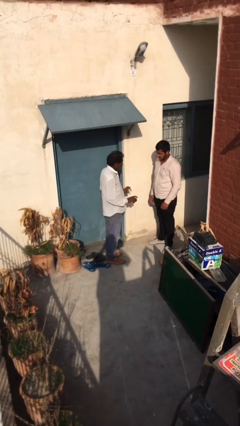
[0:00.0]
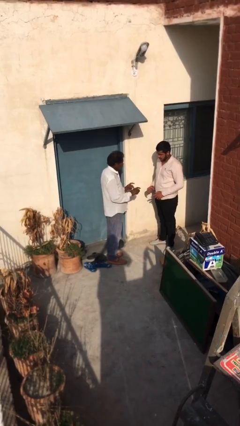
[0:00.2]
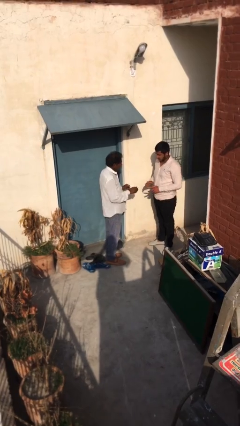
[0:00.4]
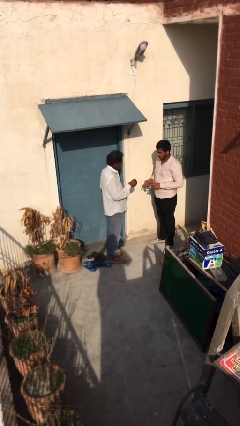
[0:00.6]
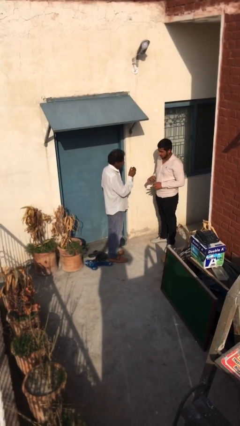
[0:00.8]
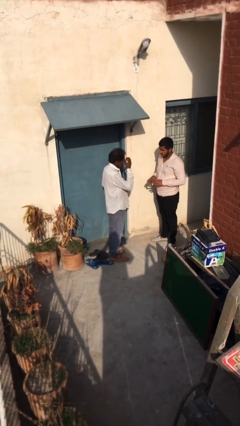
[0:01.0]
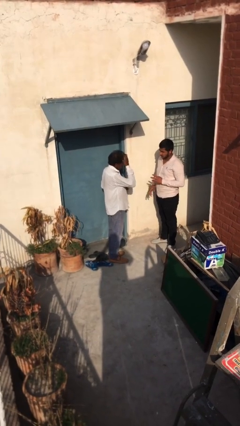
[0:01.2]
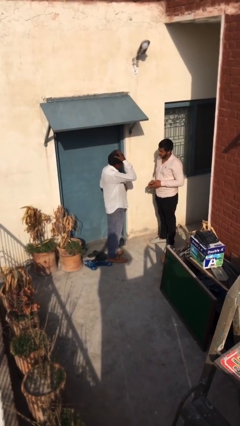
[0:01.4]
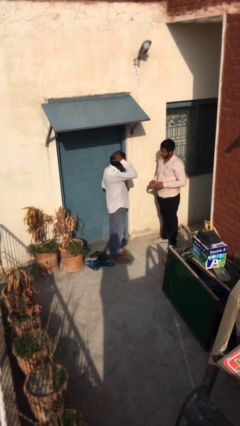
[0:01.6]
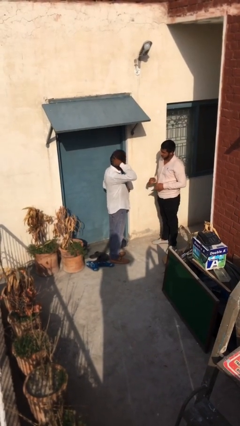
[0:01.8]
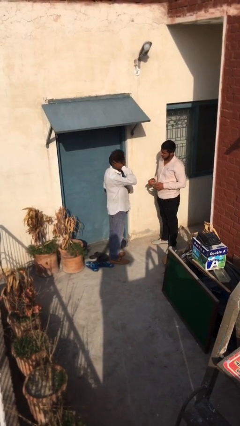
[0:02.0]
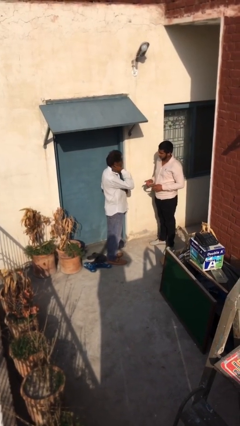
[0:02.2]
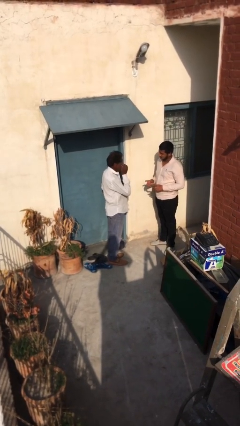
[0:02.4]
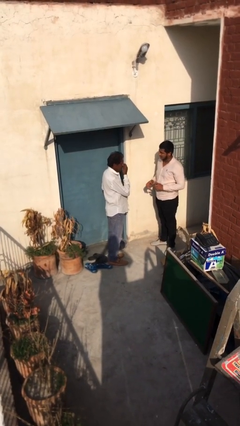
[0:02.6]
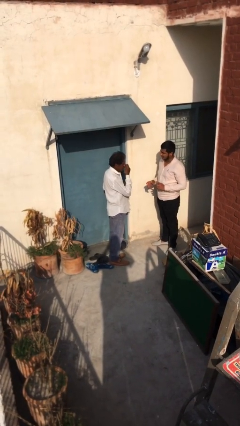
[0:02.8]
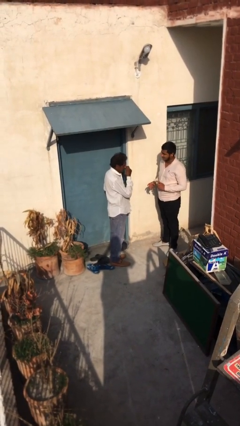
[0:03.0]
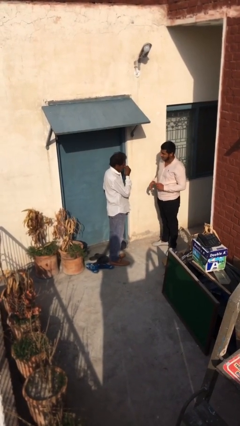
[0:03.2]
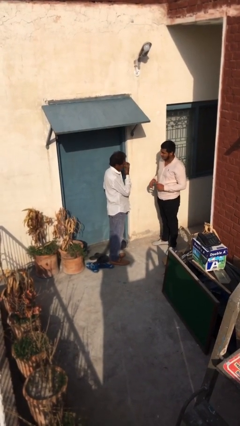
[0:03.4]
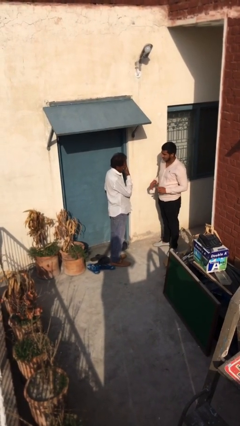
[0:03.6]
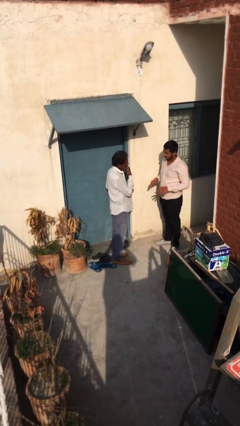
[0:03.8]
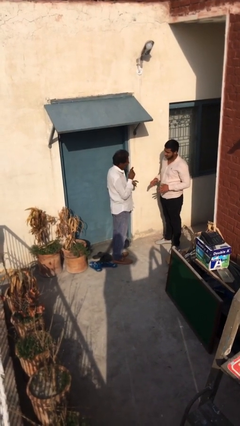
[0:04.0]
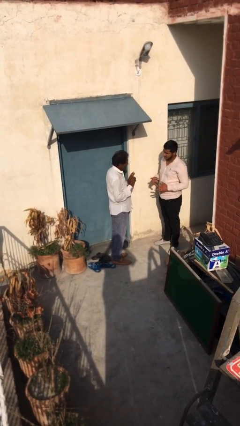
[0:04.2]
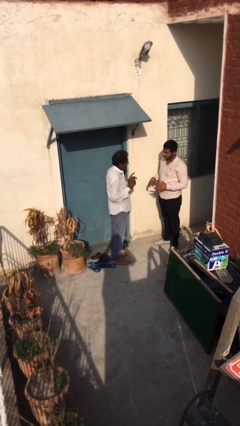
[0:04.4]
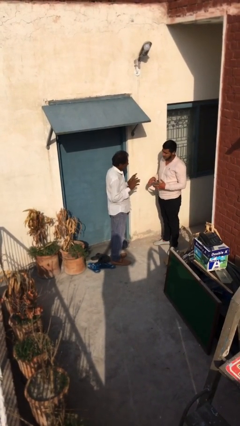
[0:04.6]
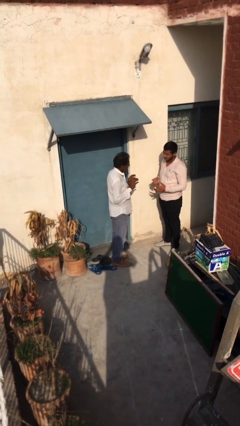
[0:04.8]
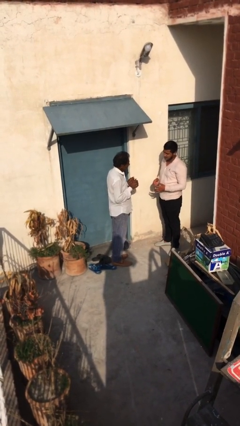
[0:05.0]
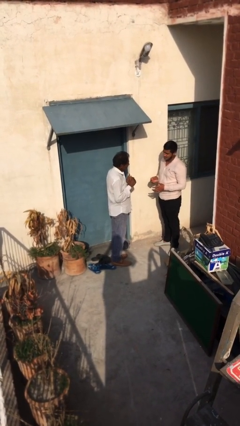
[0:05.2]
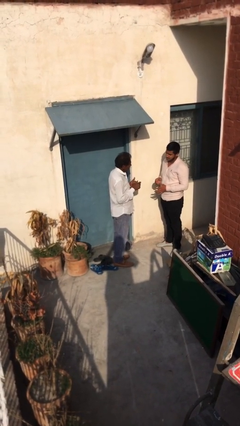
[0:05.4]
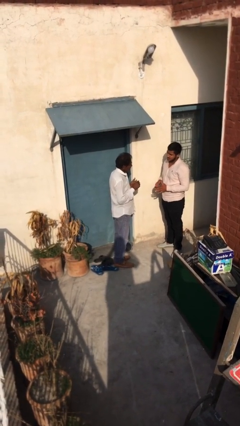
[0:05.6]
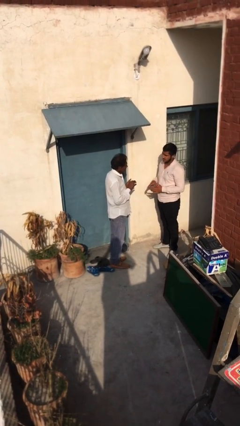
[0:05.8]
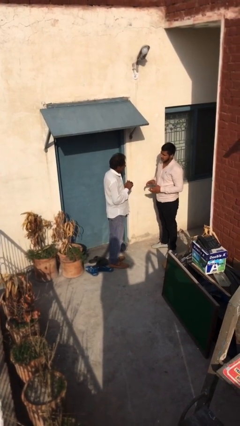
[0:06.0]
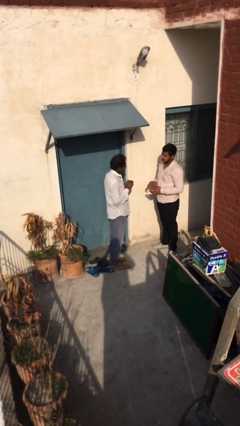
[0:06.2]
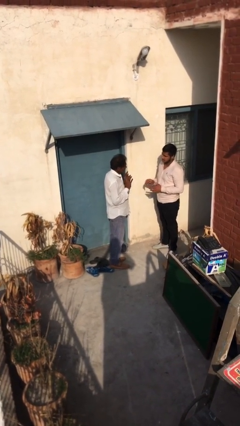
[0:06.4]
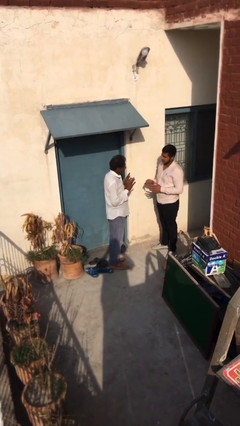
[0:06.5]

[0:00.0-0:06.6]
person talks to person

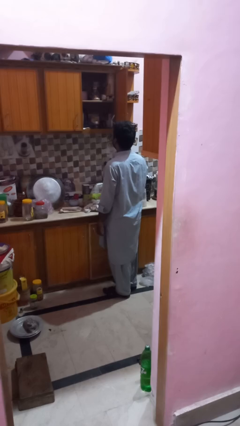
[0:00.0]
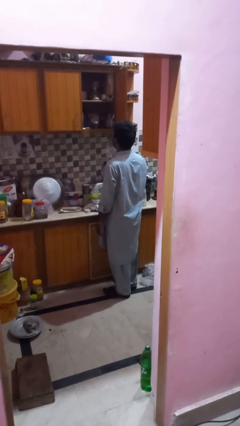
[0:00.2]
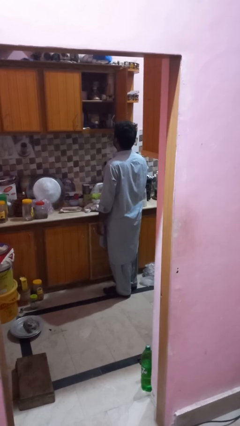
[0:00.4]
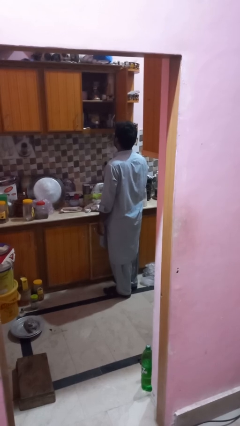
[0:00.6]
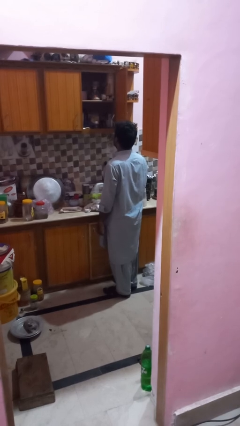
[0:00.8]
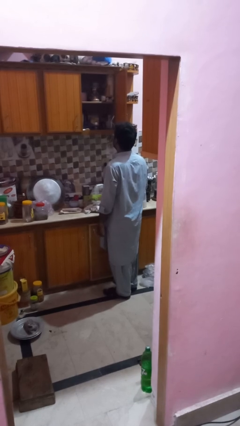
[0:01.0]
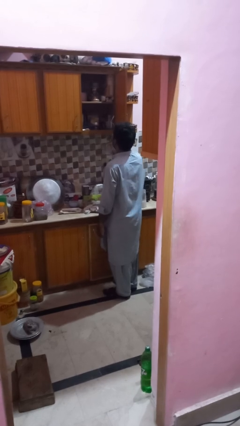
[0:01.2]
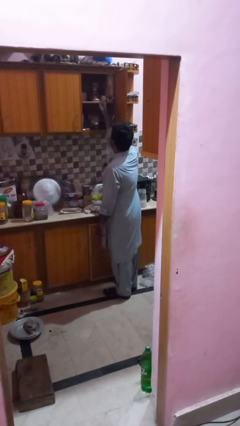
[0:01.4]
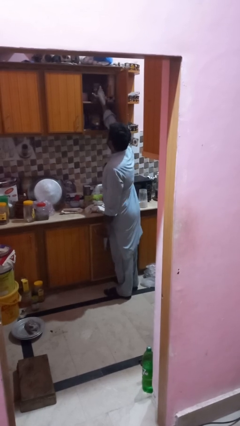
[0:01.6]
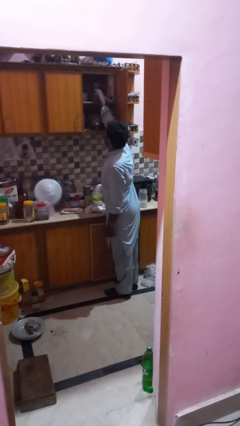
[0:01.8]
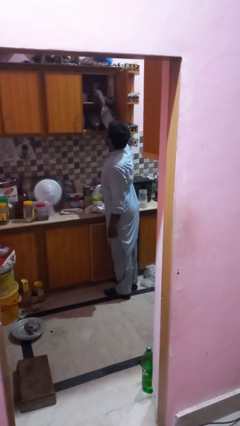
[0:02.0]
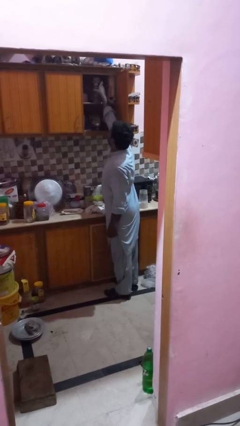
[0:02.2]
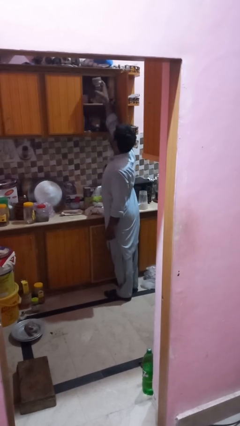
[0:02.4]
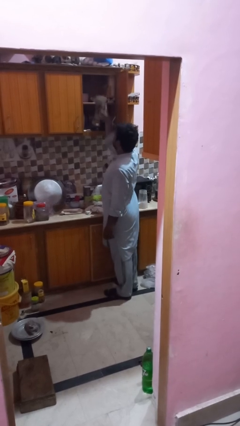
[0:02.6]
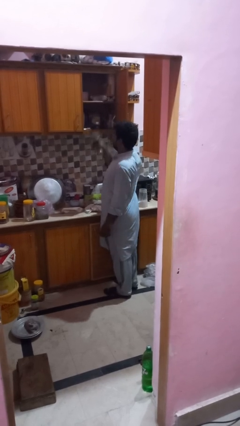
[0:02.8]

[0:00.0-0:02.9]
person takes object from cabinet

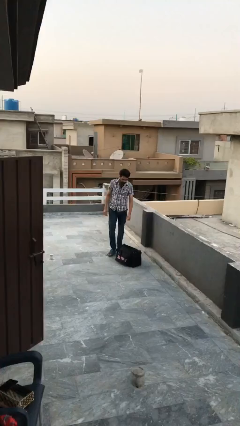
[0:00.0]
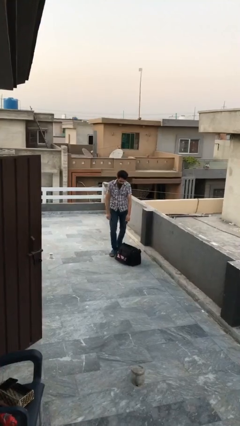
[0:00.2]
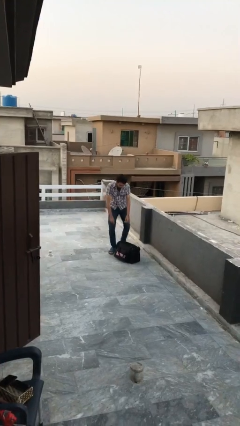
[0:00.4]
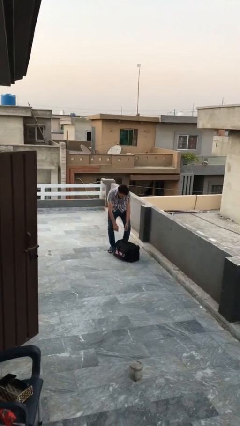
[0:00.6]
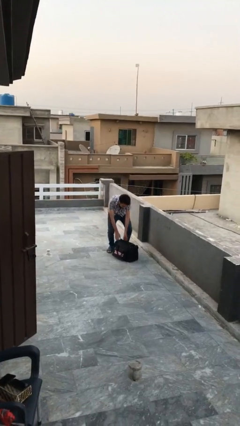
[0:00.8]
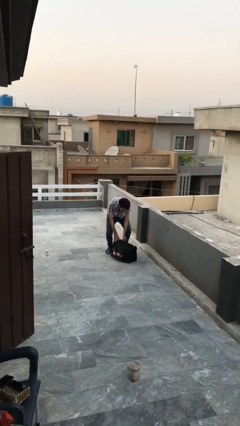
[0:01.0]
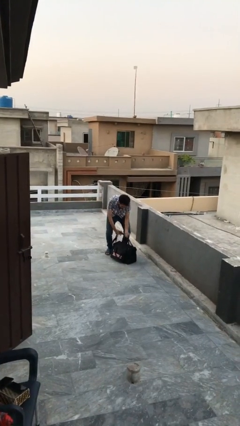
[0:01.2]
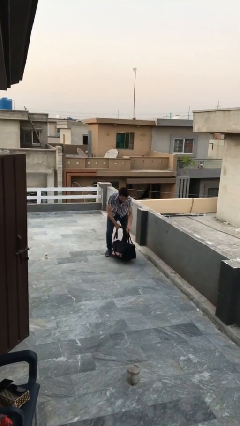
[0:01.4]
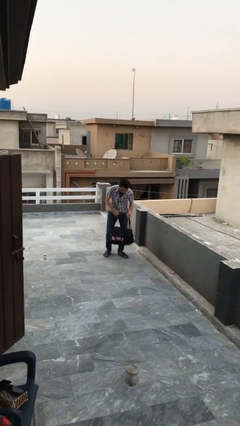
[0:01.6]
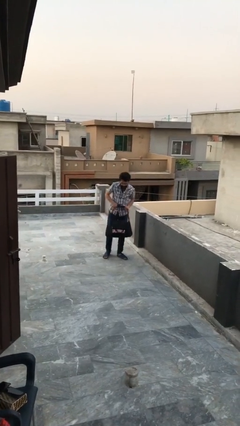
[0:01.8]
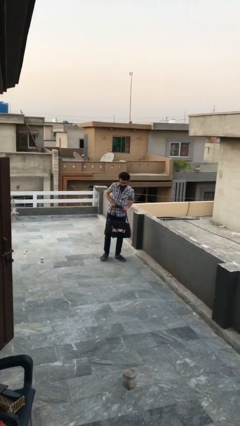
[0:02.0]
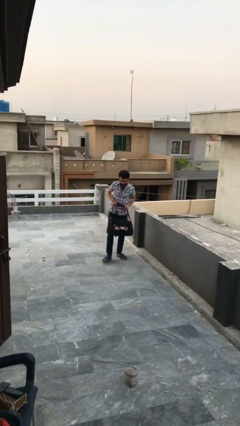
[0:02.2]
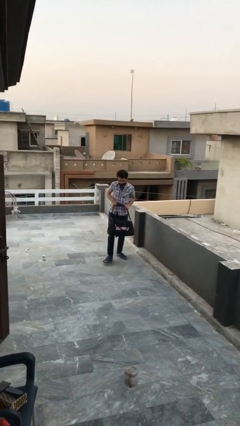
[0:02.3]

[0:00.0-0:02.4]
person picks up object from floor

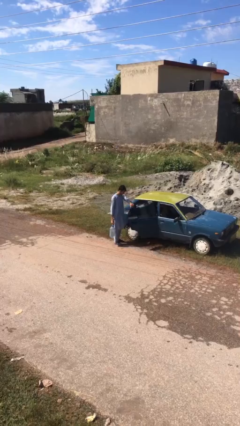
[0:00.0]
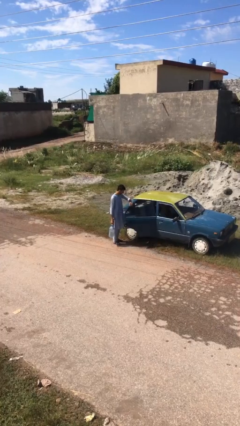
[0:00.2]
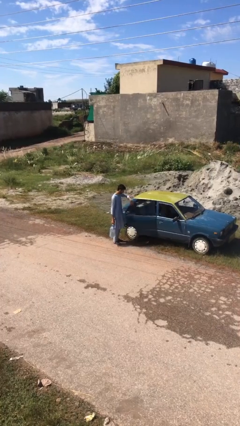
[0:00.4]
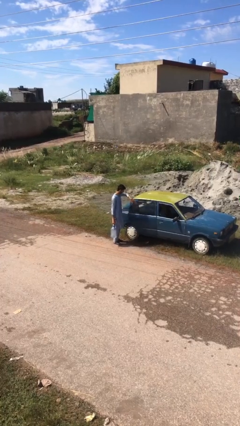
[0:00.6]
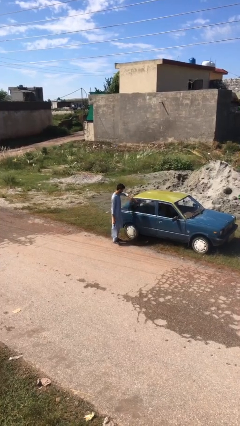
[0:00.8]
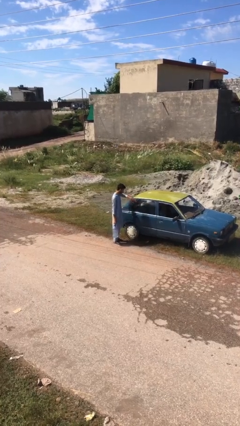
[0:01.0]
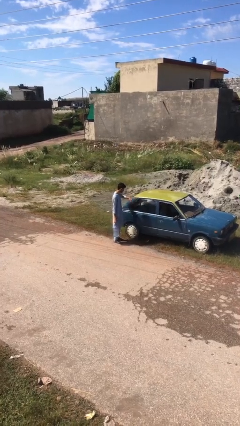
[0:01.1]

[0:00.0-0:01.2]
person closes car door

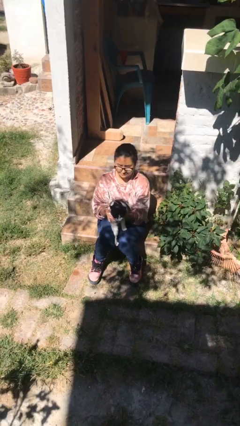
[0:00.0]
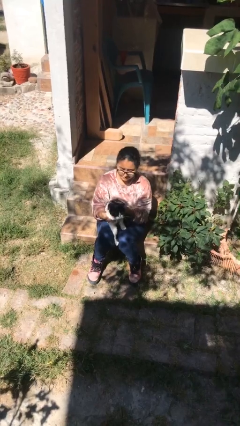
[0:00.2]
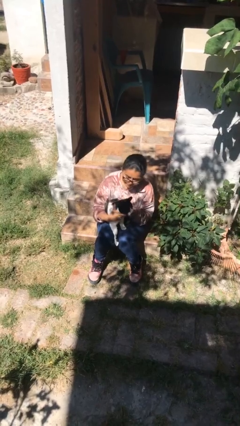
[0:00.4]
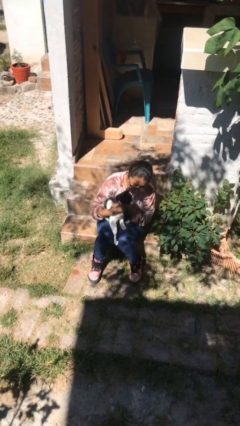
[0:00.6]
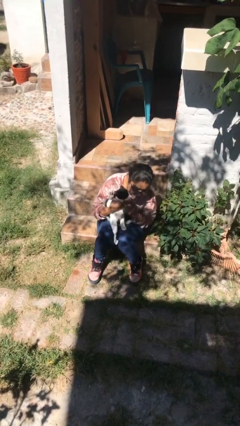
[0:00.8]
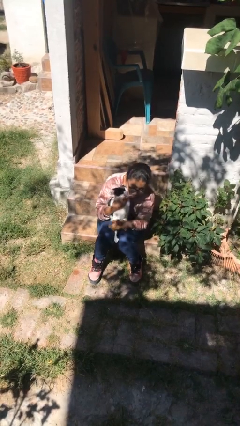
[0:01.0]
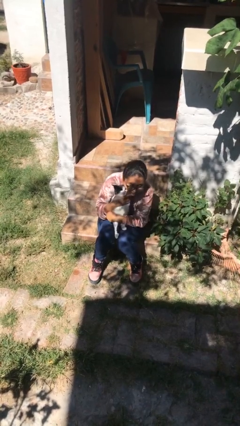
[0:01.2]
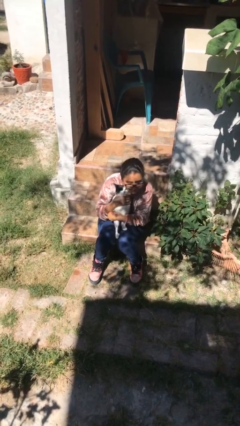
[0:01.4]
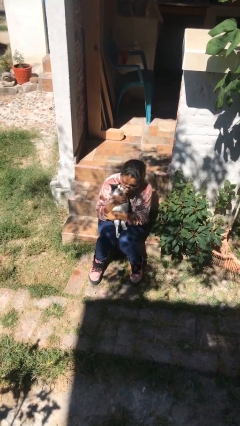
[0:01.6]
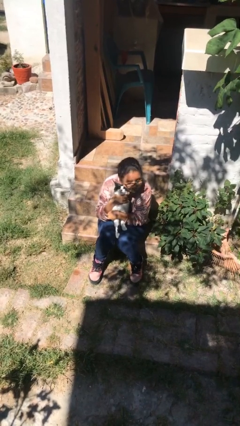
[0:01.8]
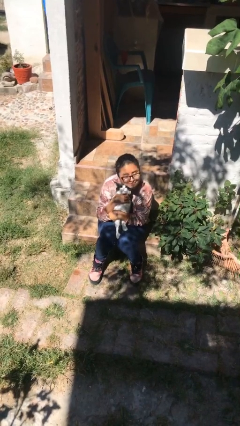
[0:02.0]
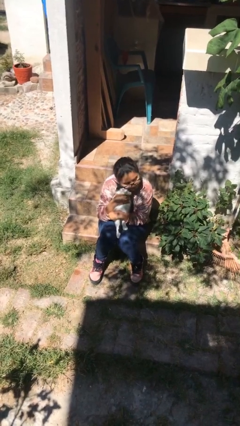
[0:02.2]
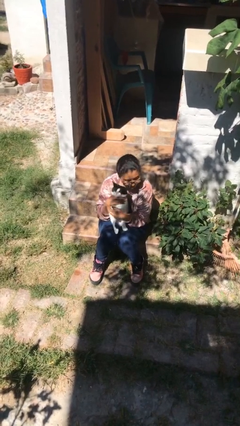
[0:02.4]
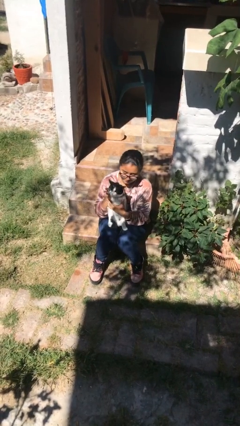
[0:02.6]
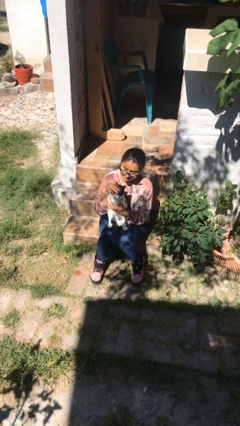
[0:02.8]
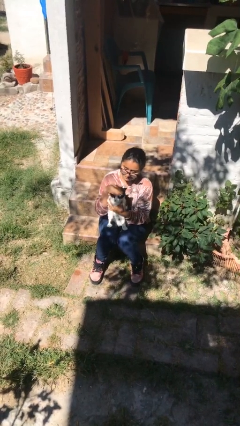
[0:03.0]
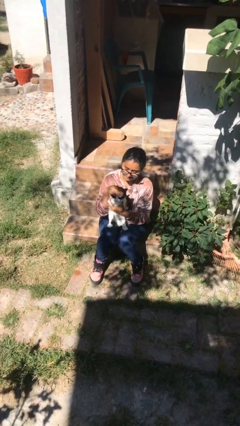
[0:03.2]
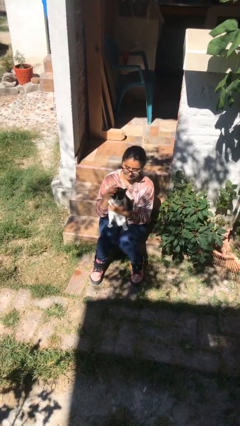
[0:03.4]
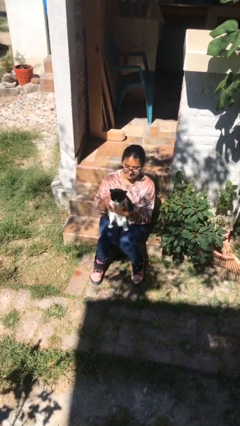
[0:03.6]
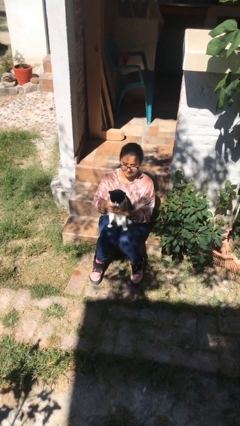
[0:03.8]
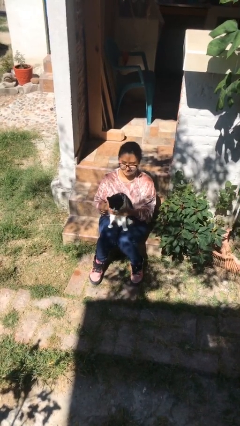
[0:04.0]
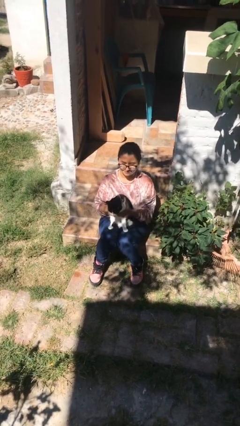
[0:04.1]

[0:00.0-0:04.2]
person hugs cat

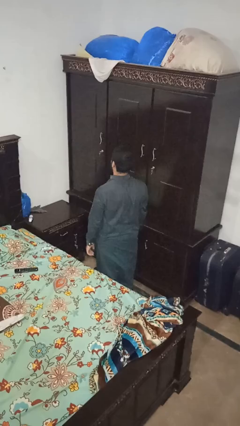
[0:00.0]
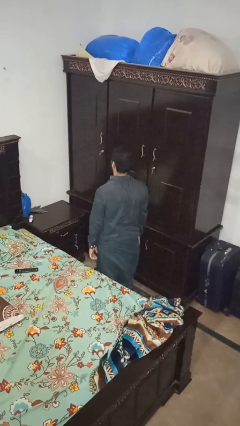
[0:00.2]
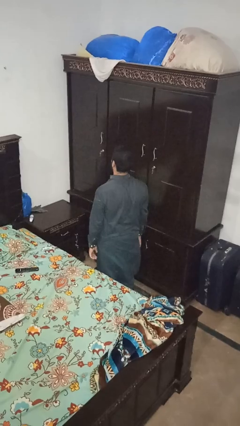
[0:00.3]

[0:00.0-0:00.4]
person searches under bed

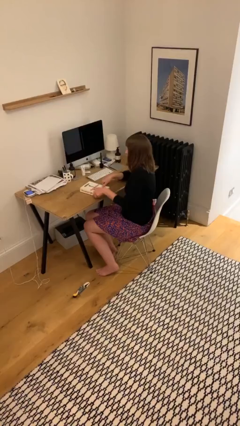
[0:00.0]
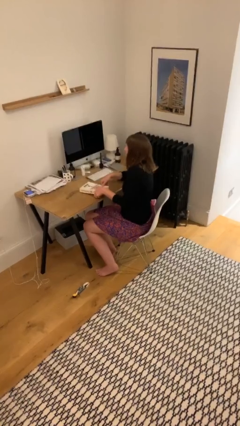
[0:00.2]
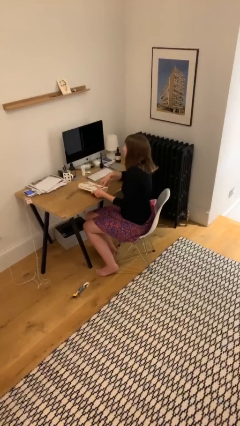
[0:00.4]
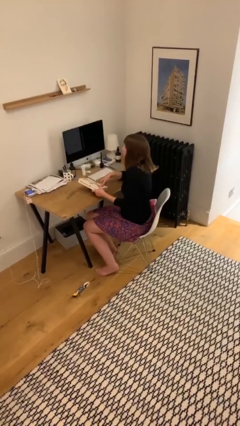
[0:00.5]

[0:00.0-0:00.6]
person picks up object from table
